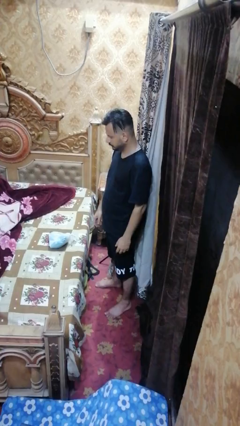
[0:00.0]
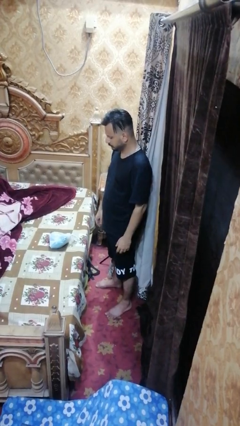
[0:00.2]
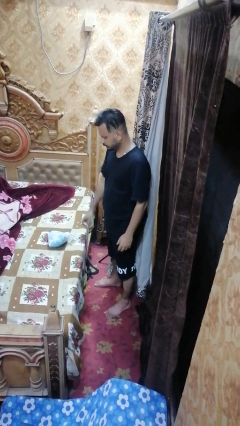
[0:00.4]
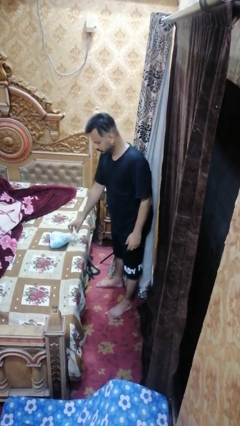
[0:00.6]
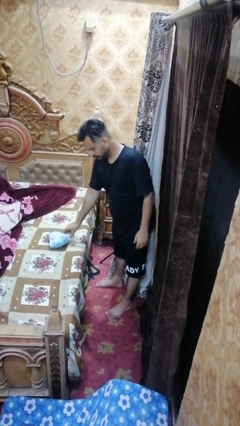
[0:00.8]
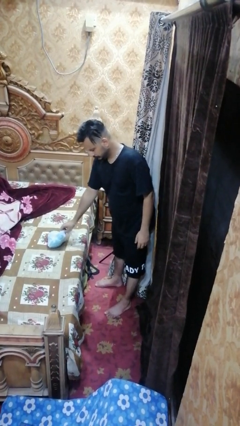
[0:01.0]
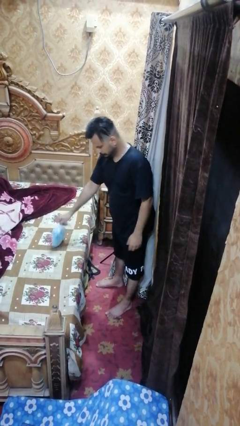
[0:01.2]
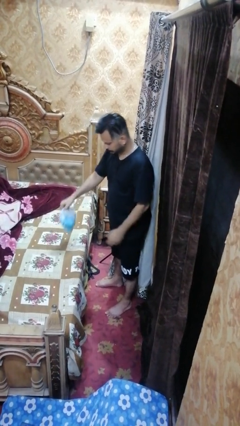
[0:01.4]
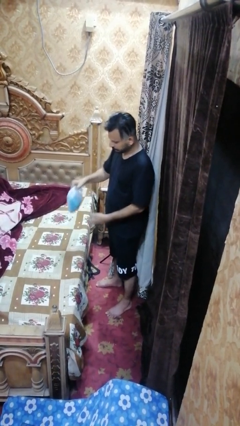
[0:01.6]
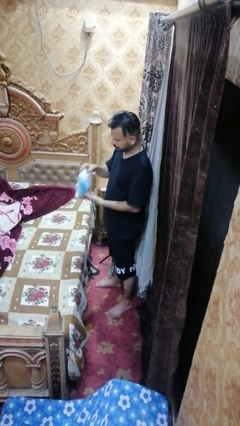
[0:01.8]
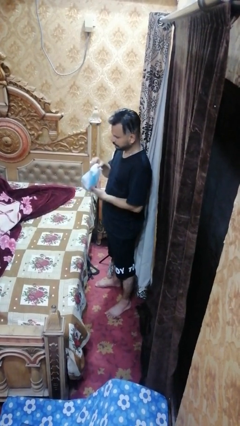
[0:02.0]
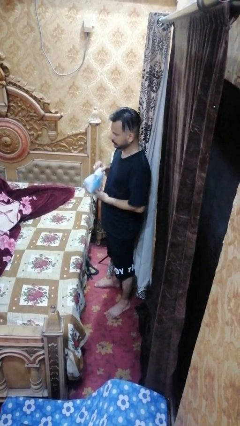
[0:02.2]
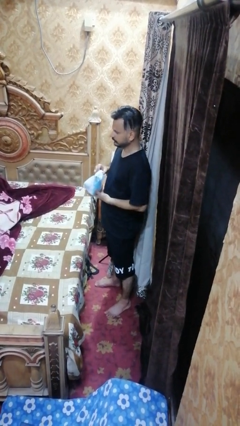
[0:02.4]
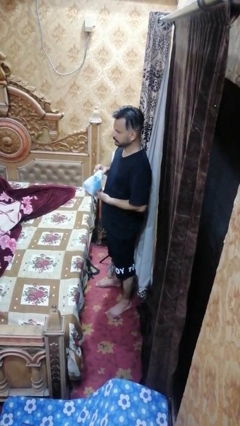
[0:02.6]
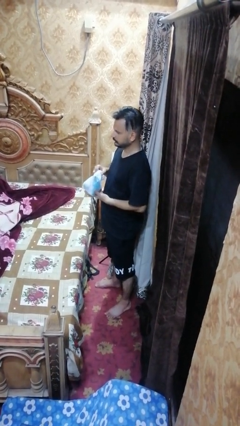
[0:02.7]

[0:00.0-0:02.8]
person picks up object from bed

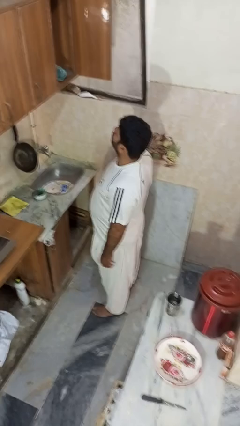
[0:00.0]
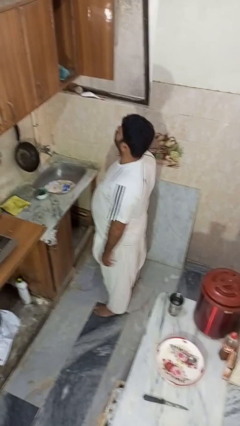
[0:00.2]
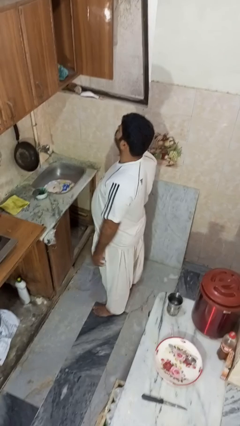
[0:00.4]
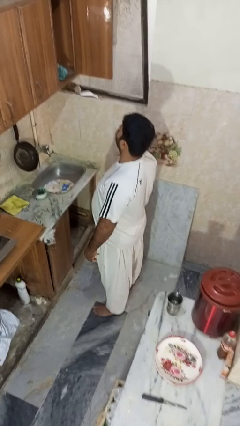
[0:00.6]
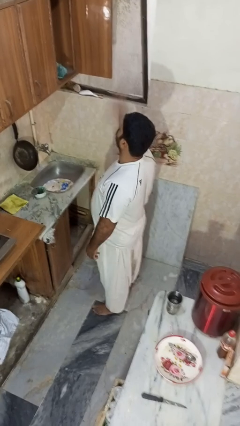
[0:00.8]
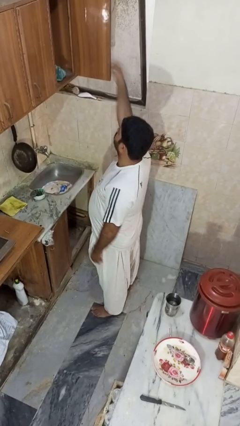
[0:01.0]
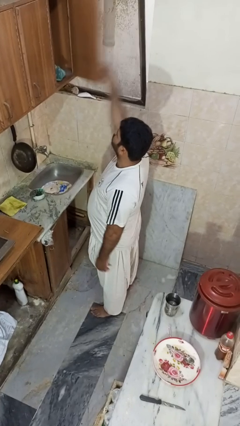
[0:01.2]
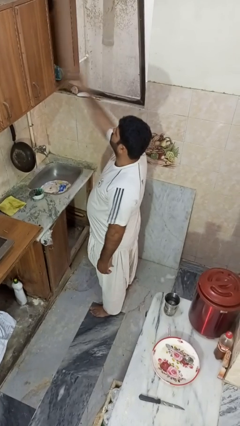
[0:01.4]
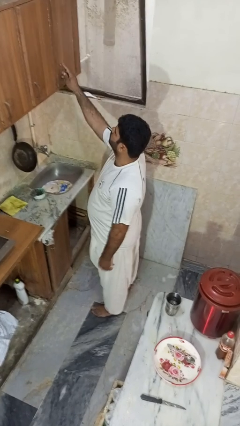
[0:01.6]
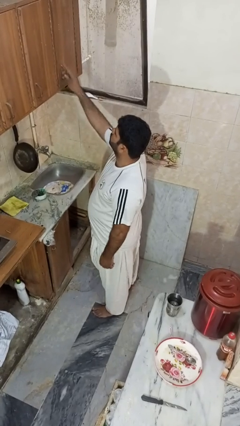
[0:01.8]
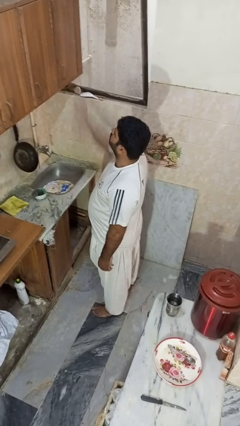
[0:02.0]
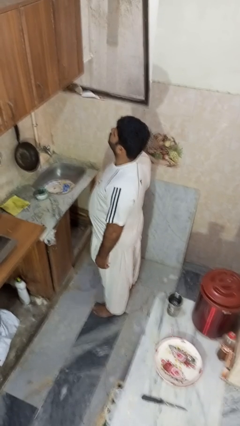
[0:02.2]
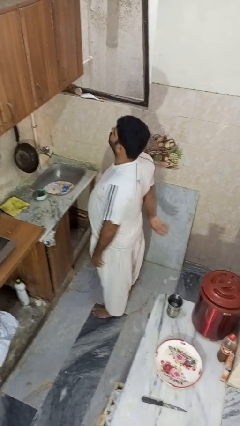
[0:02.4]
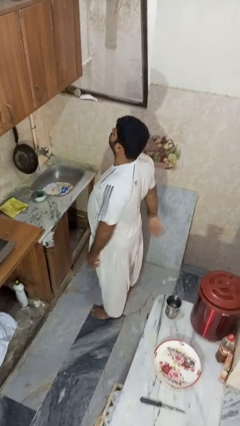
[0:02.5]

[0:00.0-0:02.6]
person closes cabinet

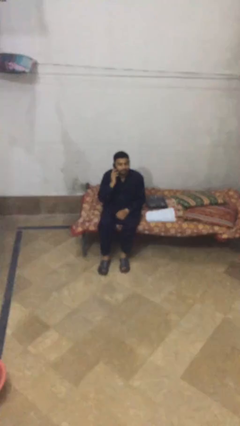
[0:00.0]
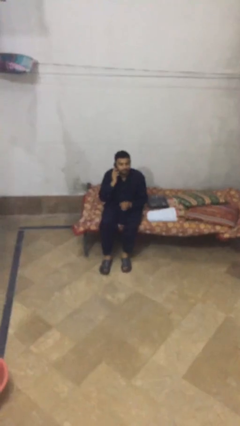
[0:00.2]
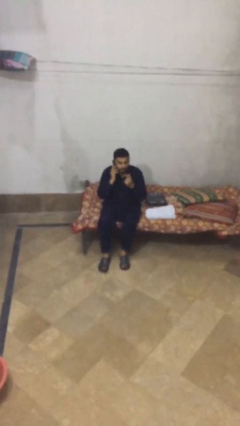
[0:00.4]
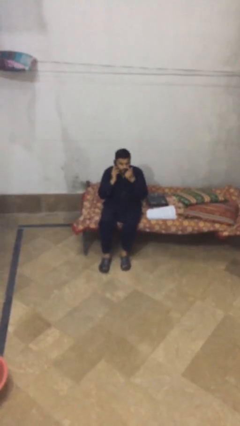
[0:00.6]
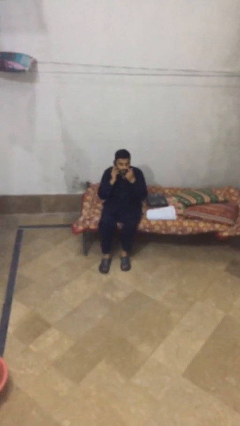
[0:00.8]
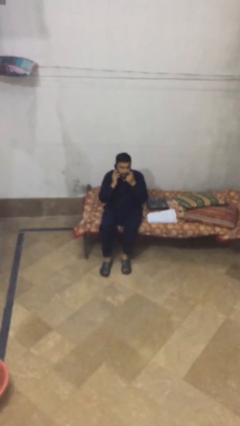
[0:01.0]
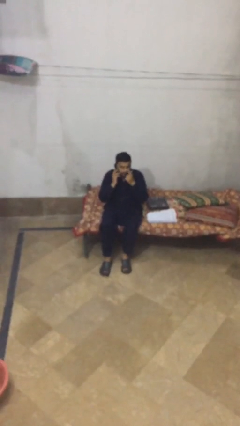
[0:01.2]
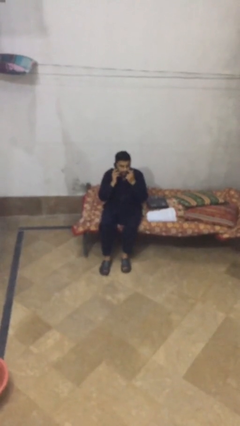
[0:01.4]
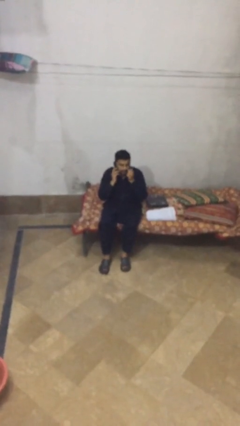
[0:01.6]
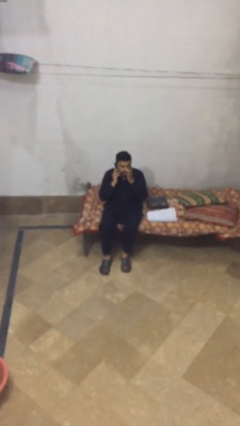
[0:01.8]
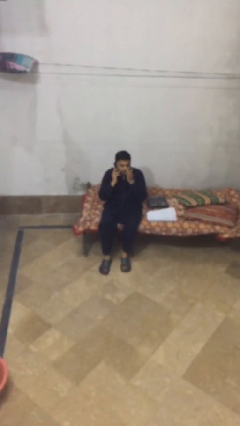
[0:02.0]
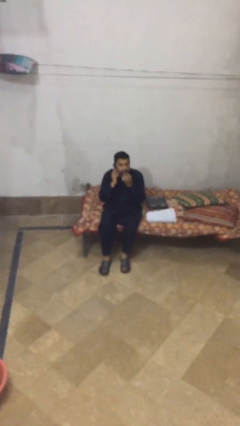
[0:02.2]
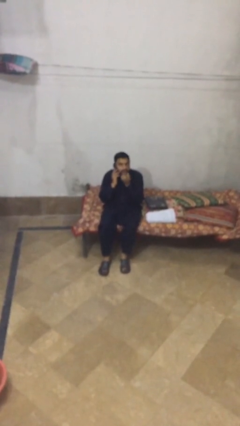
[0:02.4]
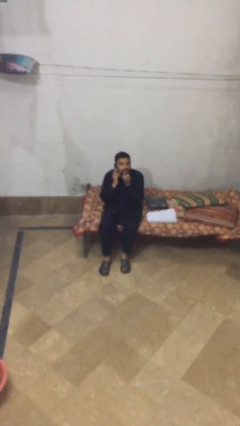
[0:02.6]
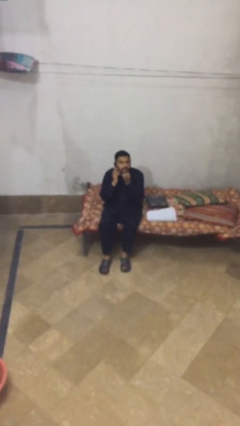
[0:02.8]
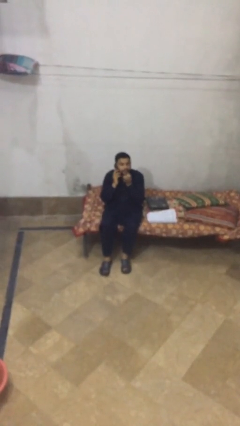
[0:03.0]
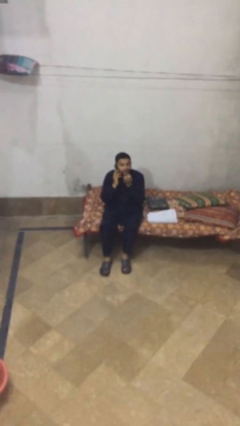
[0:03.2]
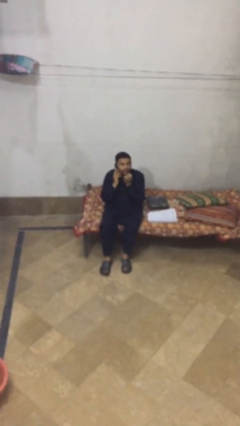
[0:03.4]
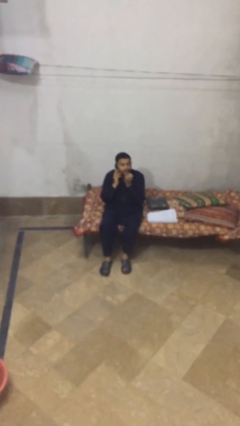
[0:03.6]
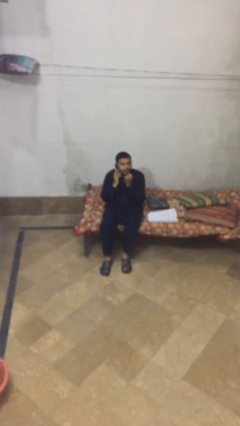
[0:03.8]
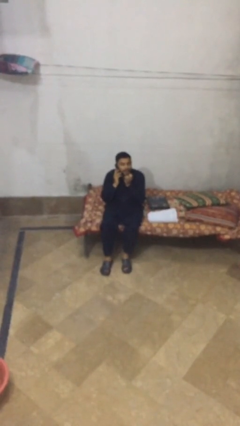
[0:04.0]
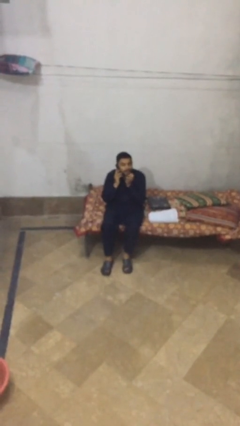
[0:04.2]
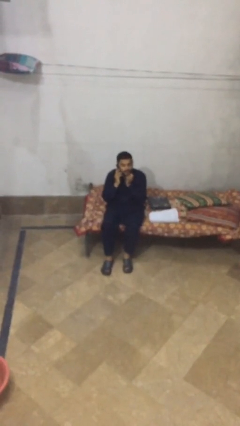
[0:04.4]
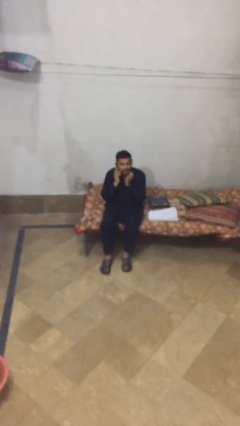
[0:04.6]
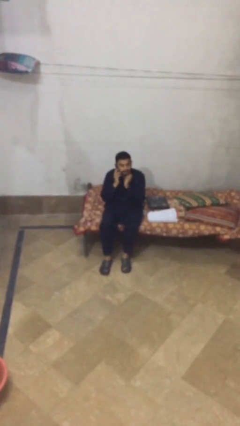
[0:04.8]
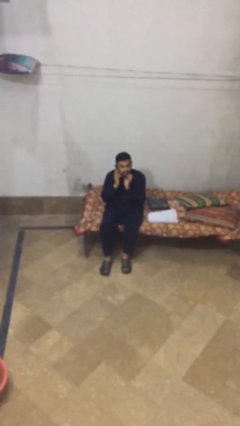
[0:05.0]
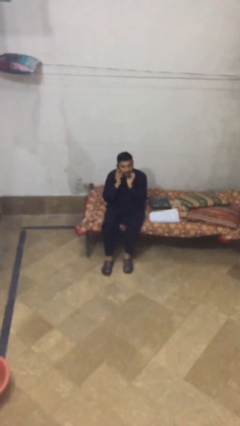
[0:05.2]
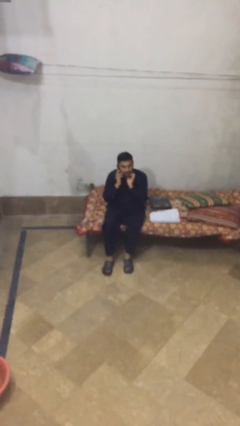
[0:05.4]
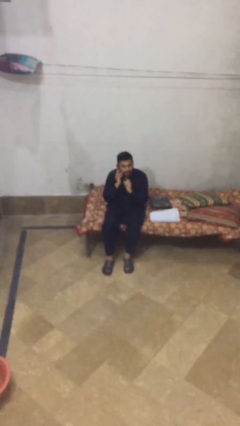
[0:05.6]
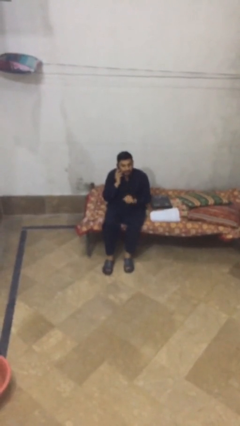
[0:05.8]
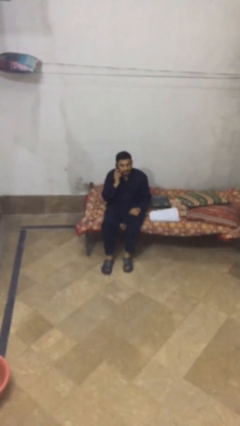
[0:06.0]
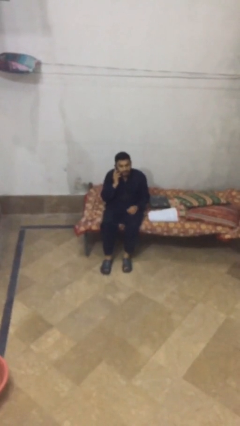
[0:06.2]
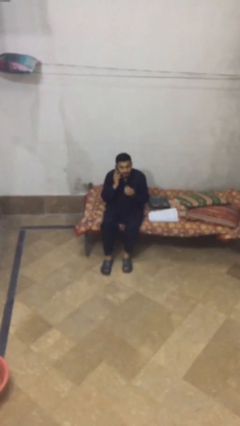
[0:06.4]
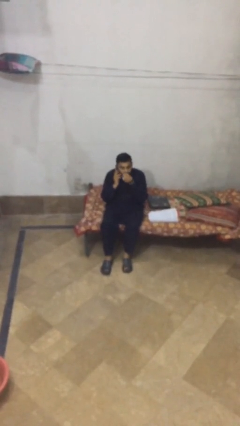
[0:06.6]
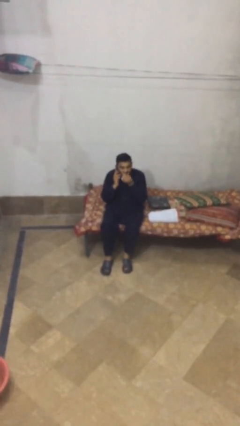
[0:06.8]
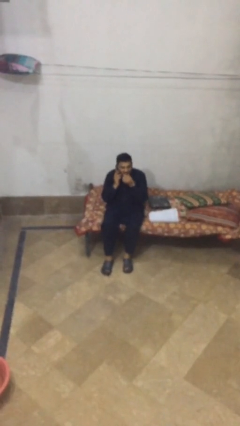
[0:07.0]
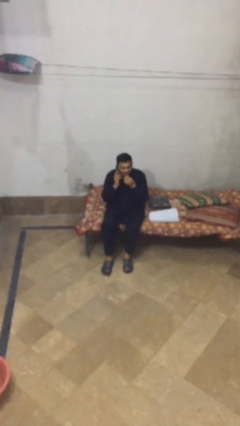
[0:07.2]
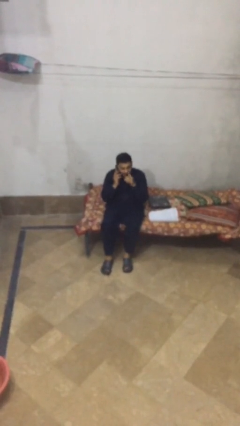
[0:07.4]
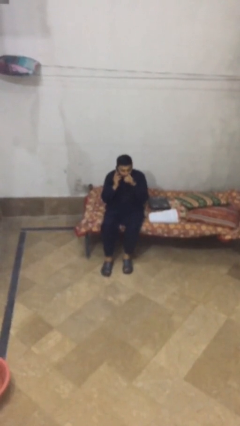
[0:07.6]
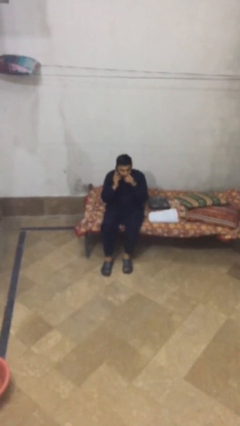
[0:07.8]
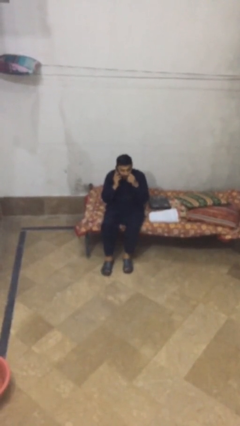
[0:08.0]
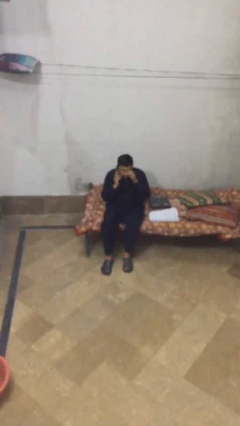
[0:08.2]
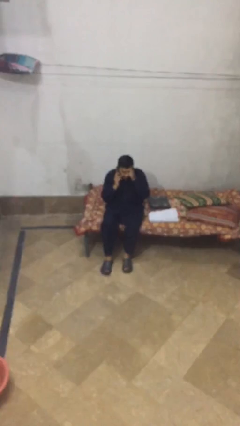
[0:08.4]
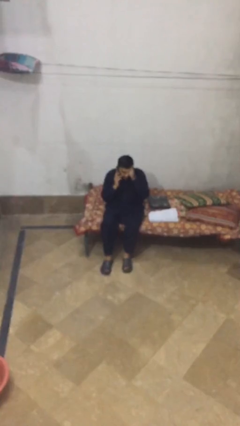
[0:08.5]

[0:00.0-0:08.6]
person talks on phone

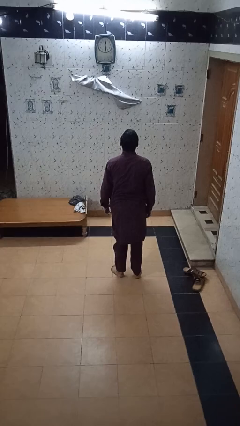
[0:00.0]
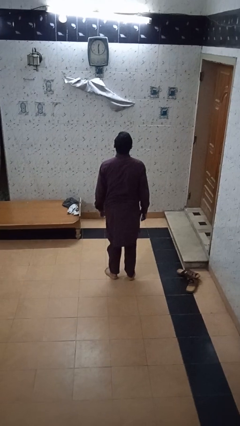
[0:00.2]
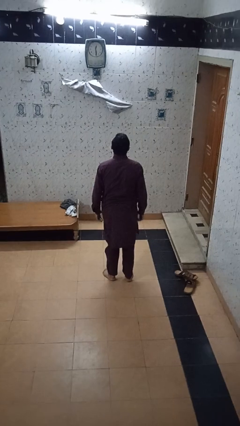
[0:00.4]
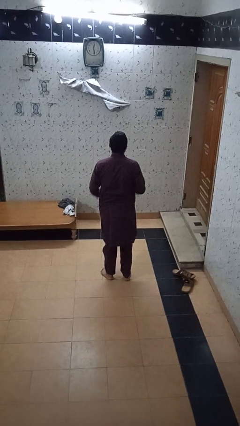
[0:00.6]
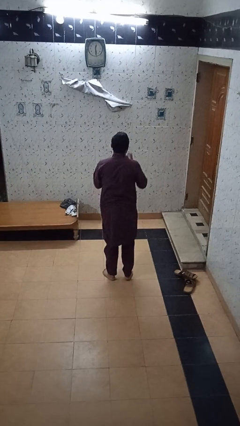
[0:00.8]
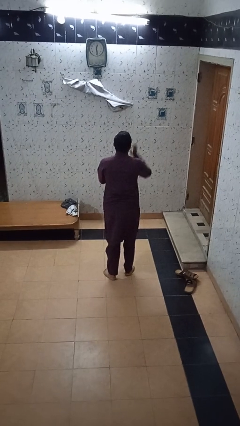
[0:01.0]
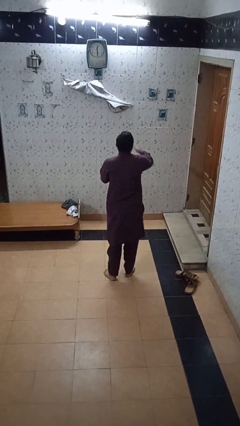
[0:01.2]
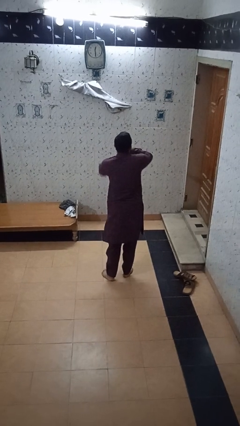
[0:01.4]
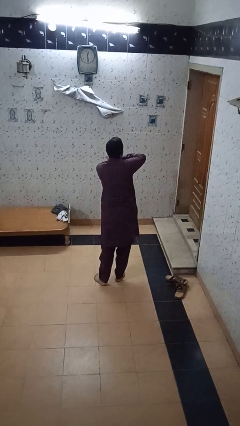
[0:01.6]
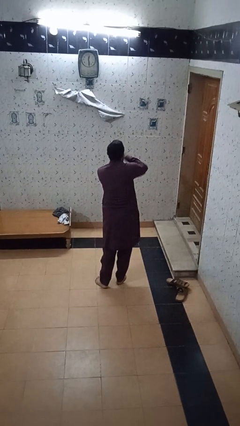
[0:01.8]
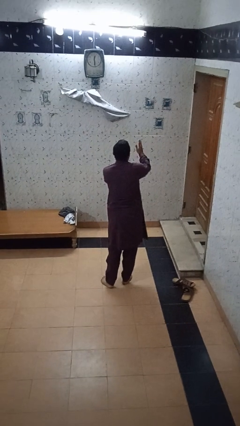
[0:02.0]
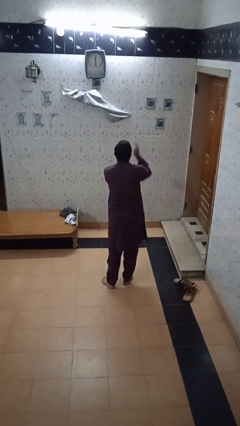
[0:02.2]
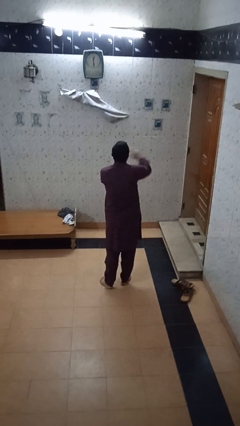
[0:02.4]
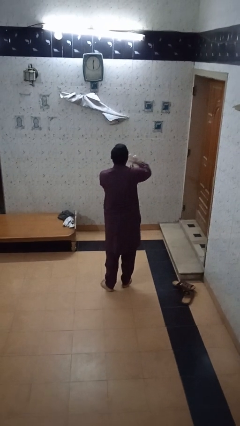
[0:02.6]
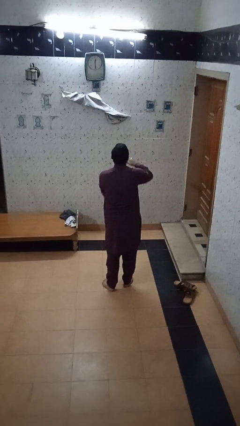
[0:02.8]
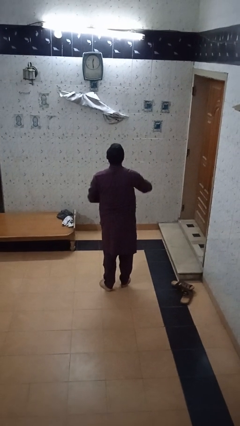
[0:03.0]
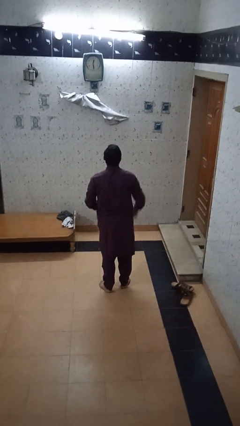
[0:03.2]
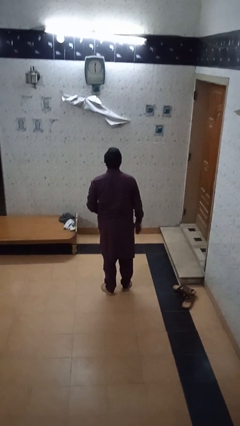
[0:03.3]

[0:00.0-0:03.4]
person karate chop
